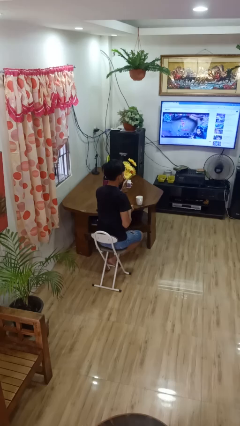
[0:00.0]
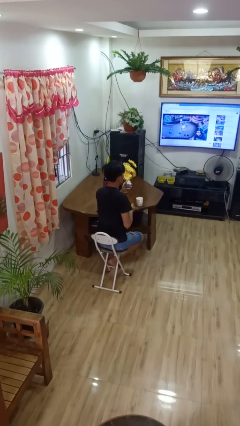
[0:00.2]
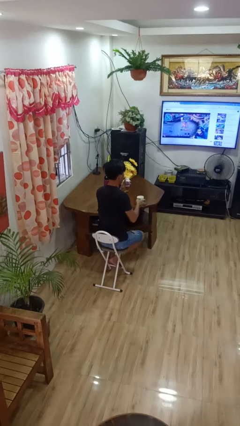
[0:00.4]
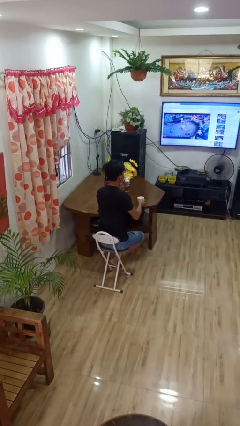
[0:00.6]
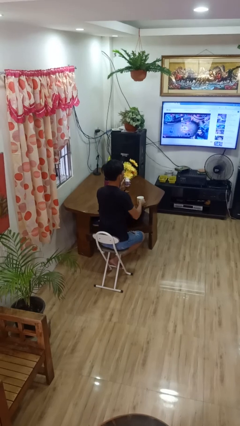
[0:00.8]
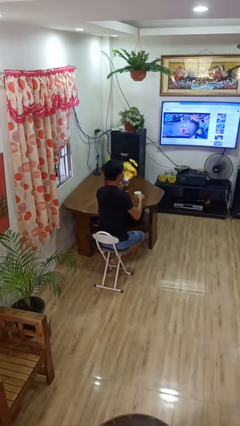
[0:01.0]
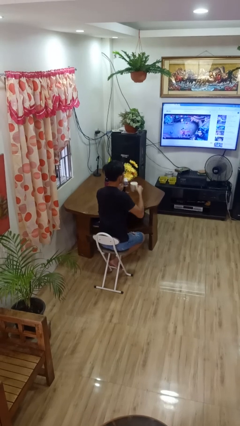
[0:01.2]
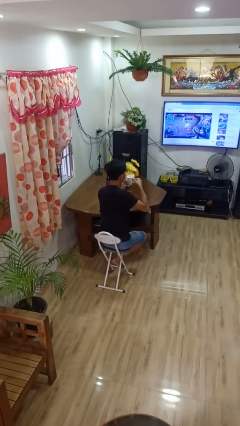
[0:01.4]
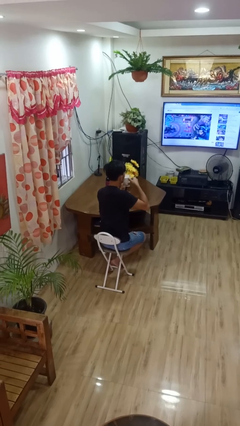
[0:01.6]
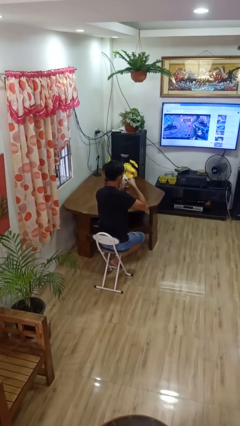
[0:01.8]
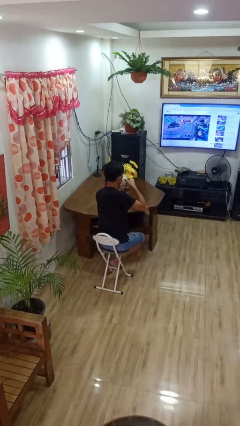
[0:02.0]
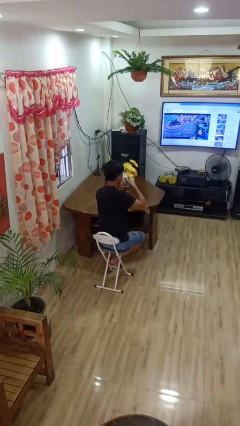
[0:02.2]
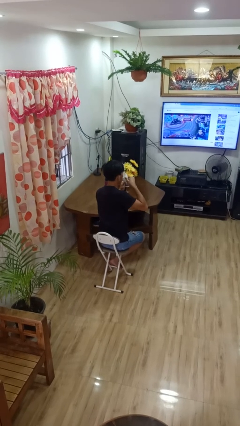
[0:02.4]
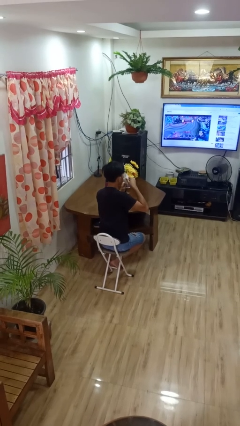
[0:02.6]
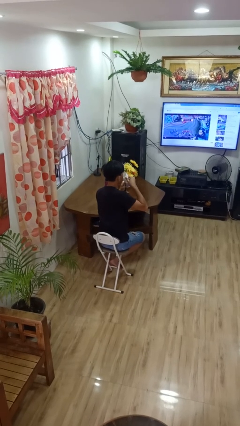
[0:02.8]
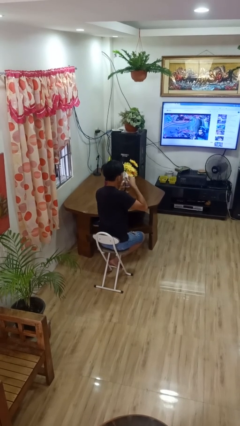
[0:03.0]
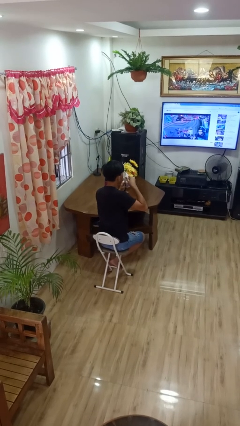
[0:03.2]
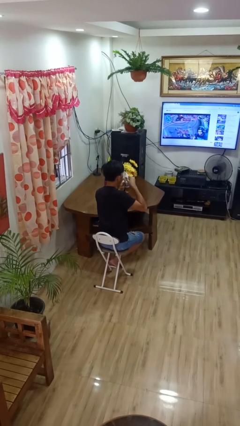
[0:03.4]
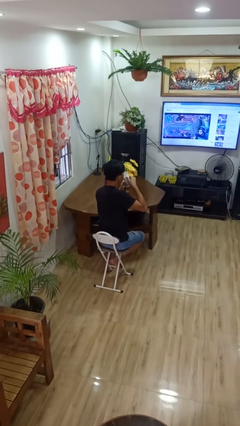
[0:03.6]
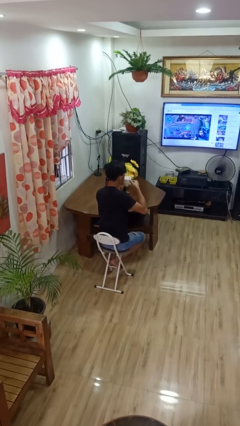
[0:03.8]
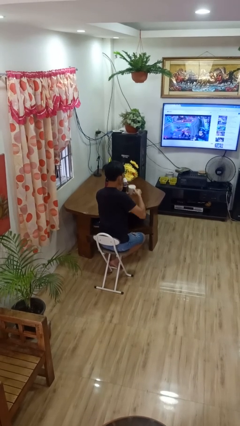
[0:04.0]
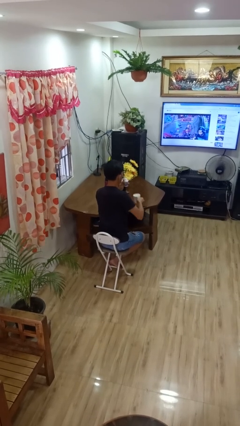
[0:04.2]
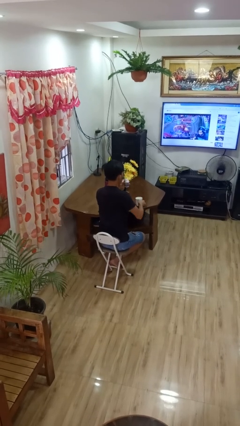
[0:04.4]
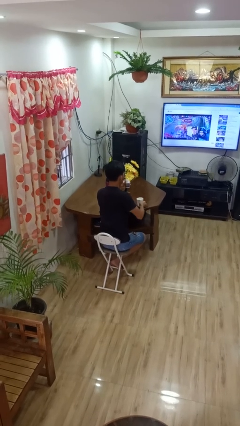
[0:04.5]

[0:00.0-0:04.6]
person drinks from cup

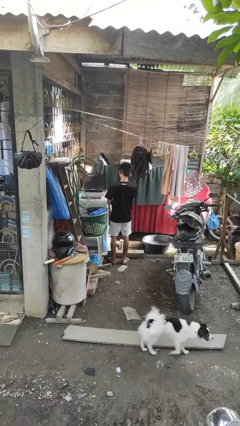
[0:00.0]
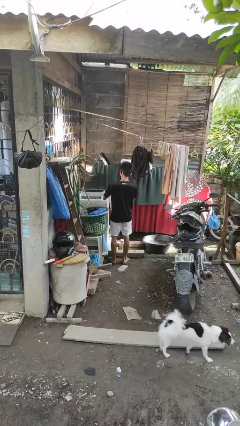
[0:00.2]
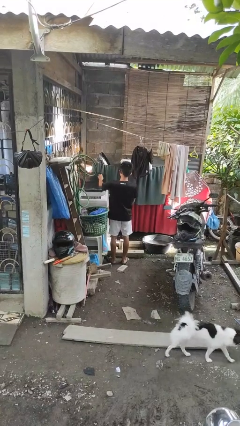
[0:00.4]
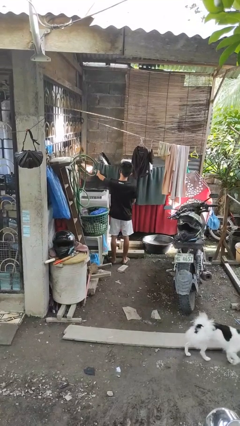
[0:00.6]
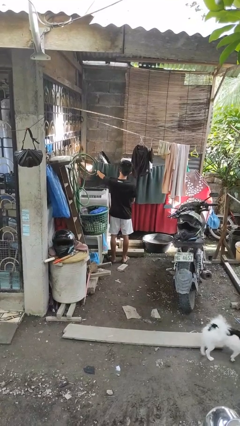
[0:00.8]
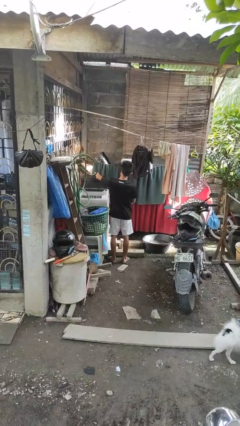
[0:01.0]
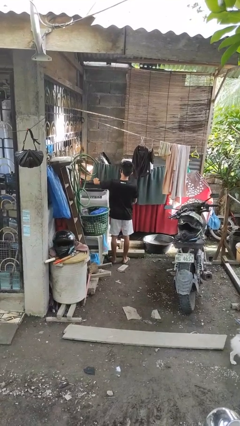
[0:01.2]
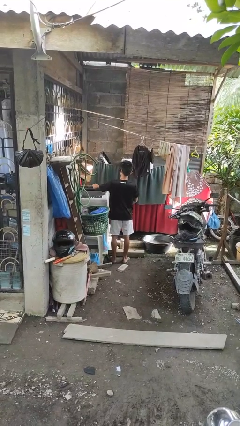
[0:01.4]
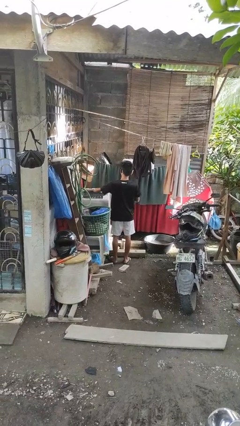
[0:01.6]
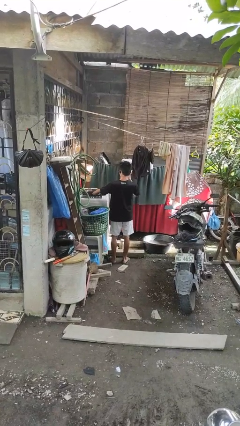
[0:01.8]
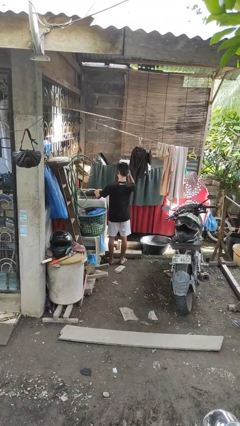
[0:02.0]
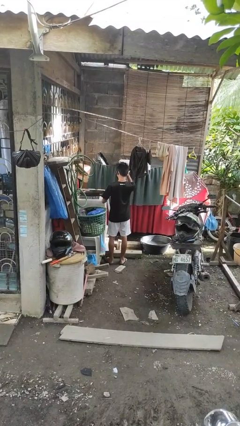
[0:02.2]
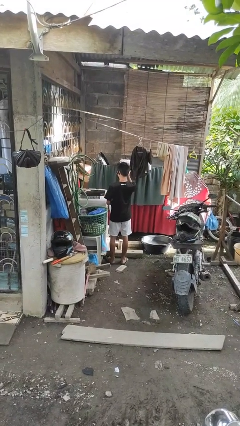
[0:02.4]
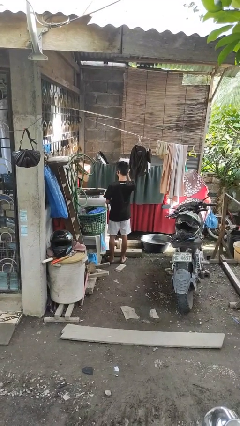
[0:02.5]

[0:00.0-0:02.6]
person closes clothes washer

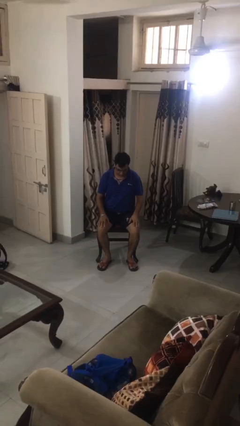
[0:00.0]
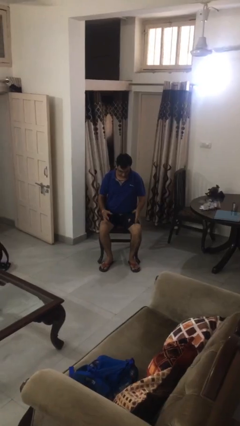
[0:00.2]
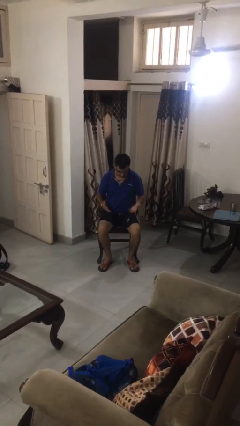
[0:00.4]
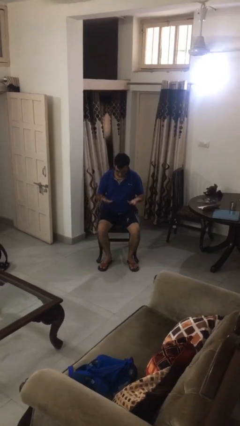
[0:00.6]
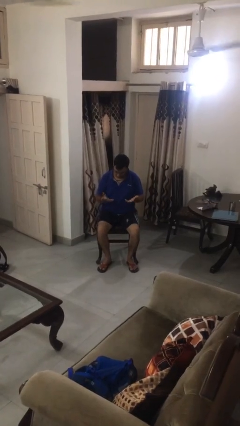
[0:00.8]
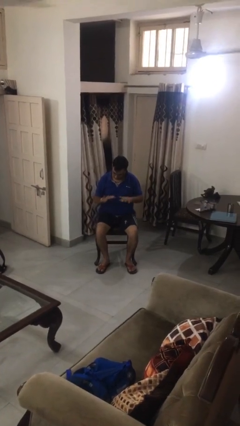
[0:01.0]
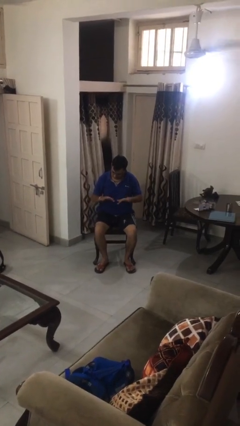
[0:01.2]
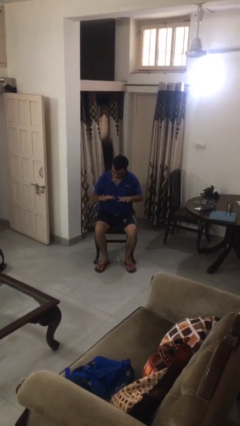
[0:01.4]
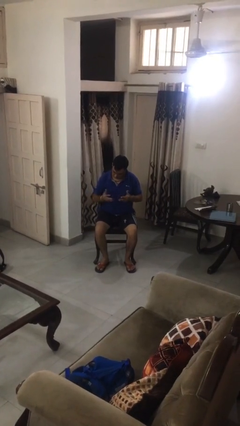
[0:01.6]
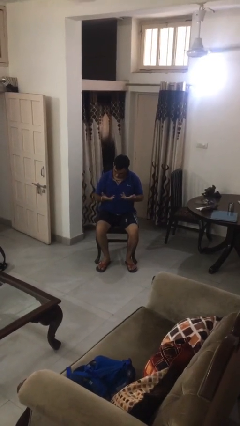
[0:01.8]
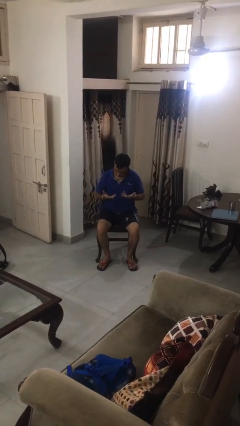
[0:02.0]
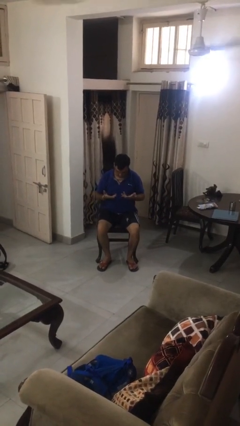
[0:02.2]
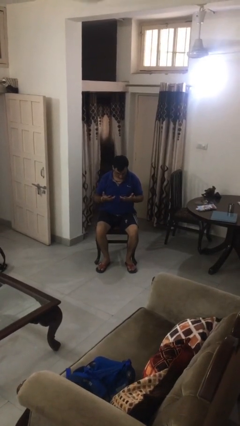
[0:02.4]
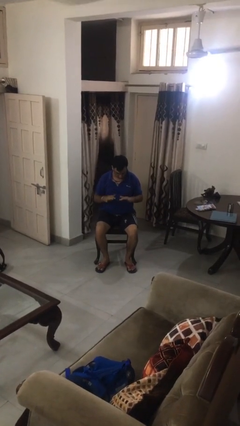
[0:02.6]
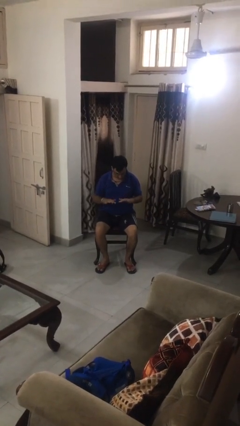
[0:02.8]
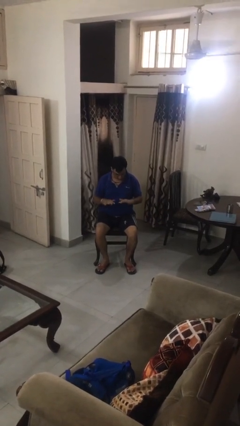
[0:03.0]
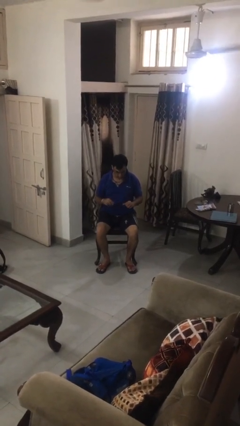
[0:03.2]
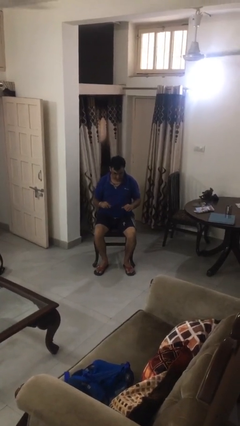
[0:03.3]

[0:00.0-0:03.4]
person looks at hands in lap

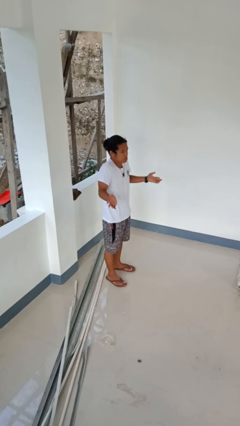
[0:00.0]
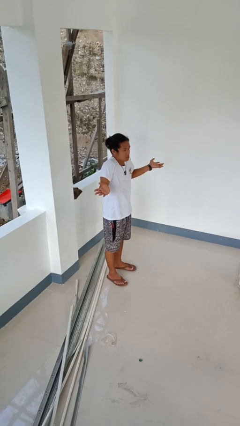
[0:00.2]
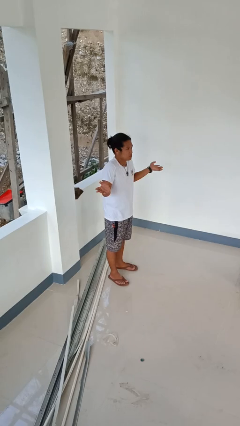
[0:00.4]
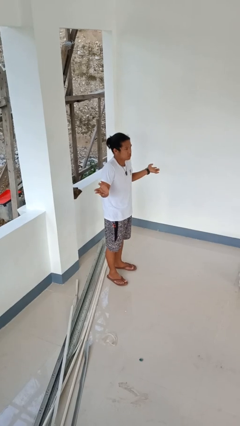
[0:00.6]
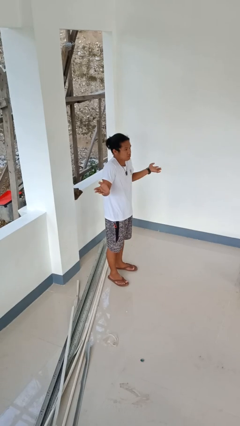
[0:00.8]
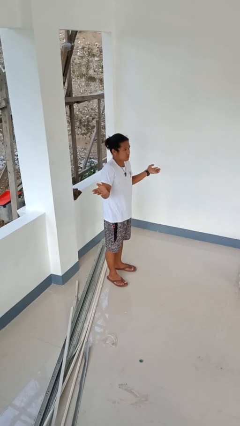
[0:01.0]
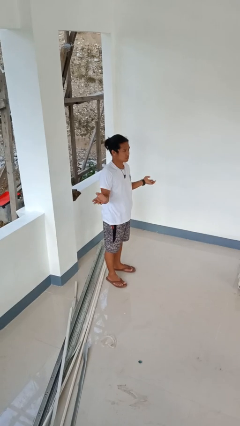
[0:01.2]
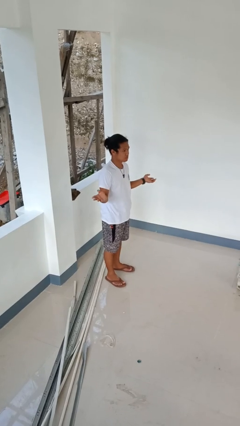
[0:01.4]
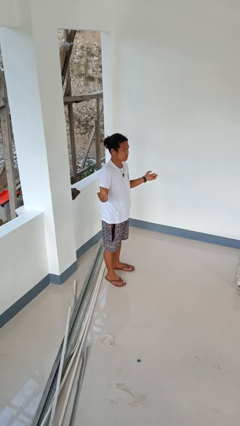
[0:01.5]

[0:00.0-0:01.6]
person shrugs

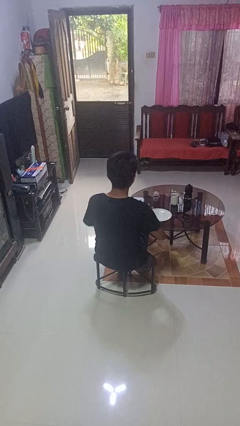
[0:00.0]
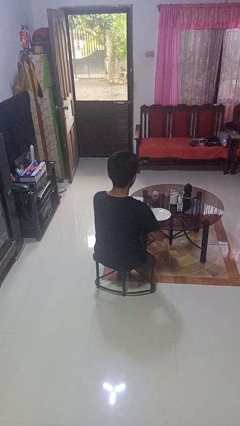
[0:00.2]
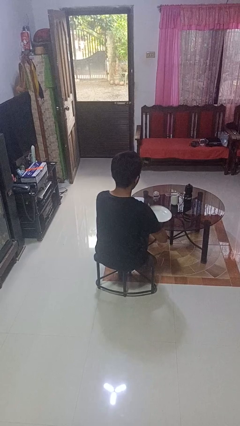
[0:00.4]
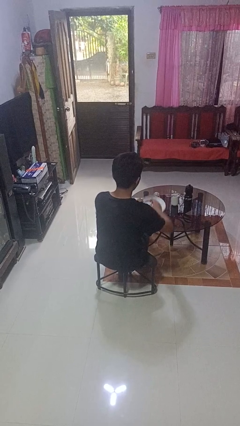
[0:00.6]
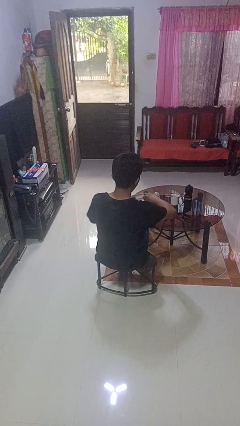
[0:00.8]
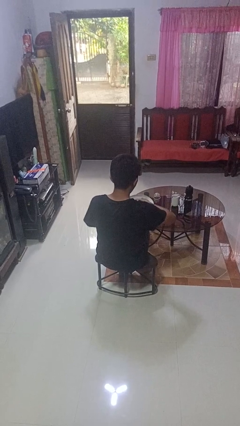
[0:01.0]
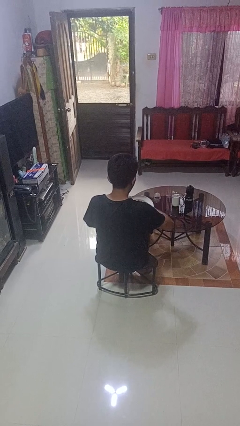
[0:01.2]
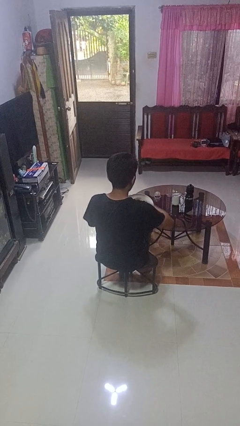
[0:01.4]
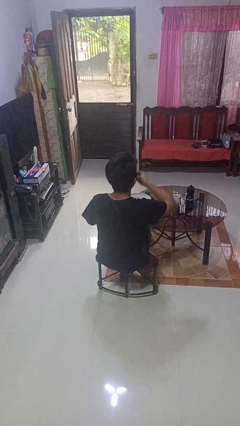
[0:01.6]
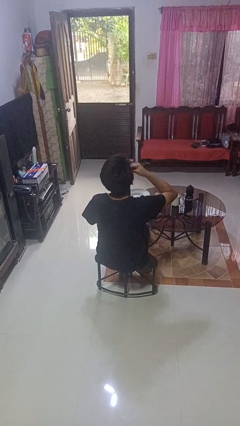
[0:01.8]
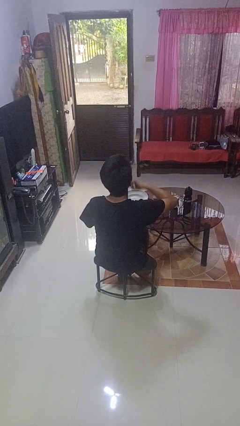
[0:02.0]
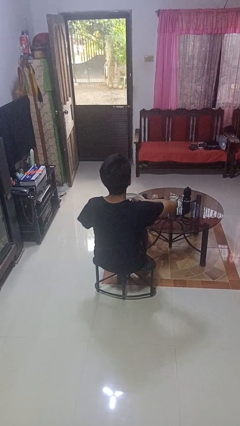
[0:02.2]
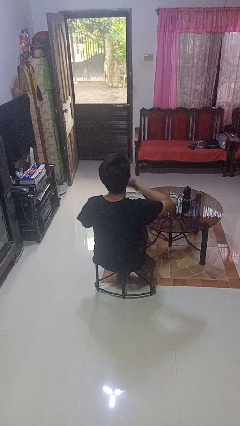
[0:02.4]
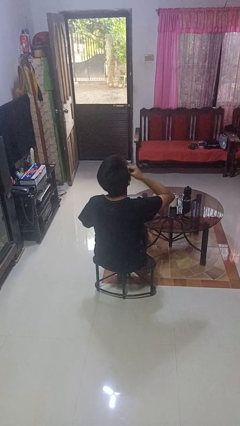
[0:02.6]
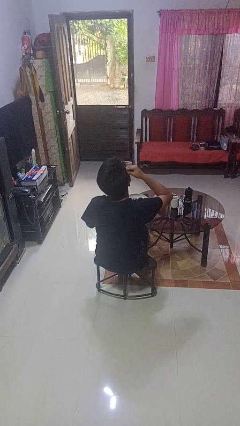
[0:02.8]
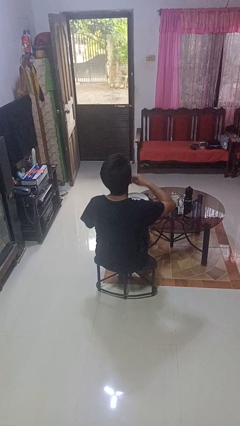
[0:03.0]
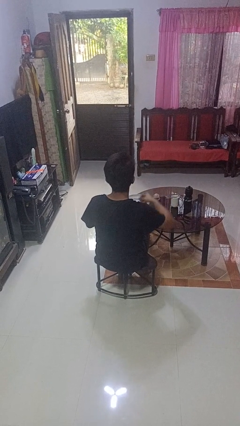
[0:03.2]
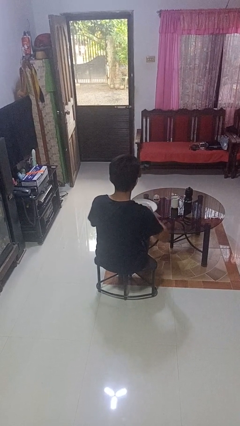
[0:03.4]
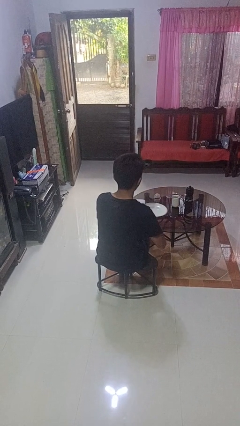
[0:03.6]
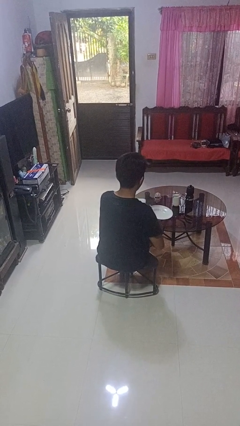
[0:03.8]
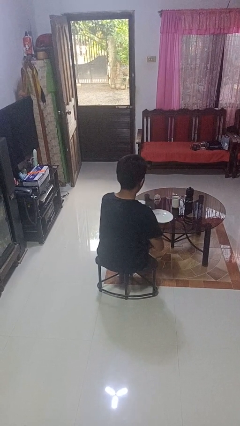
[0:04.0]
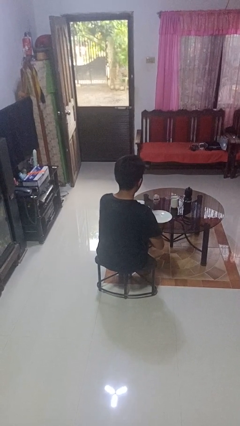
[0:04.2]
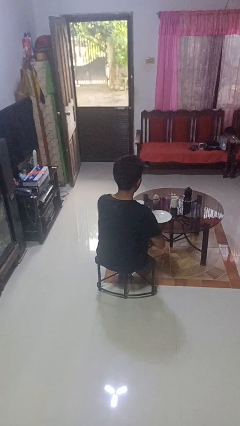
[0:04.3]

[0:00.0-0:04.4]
person eats with hands

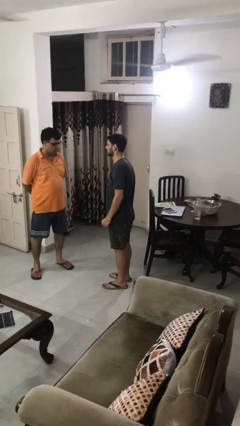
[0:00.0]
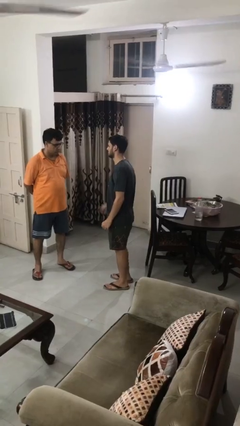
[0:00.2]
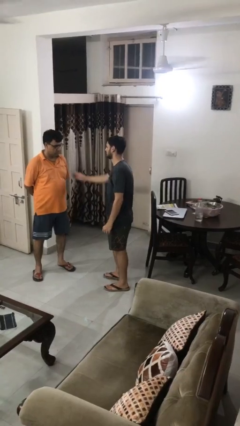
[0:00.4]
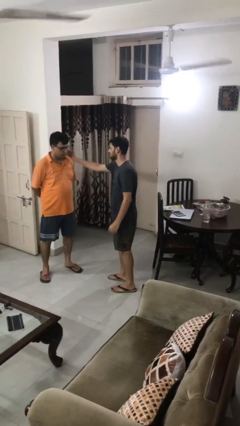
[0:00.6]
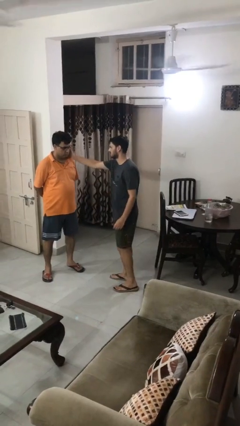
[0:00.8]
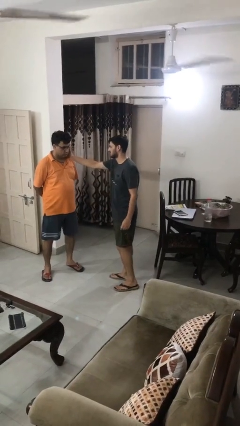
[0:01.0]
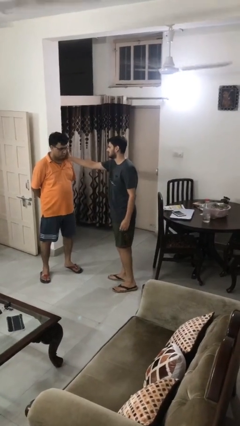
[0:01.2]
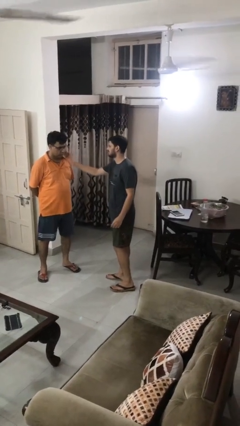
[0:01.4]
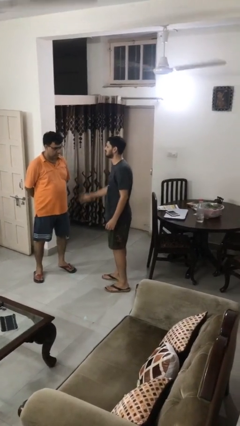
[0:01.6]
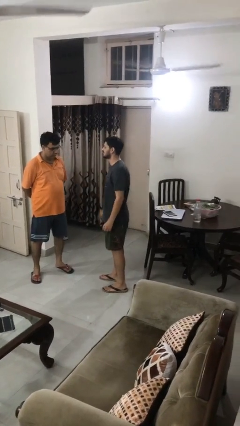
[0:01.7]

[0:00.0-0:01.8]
person touches face of person
